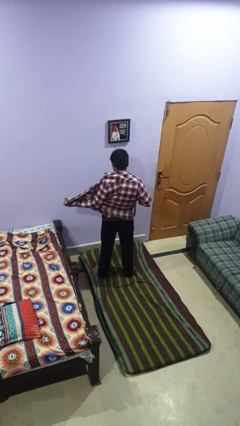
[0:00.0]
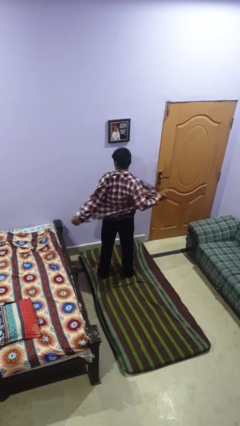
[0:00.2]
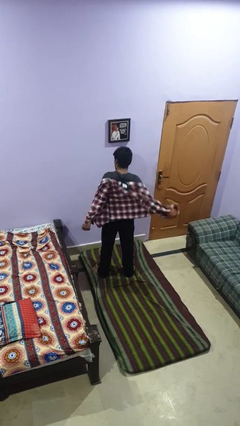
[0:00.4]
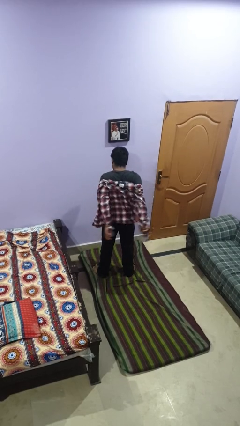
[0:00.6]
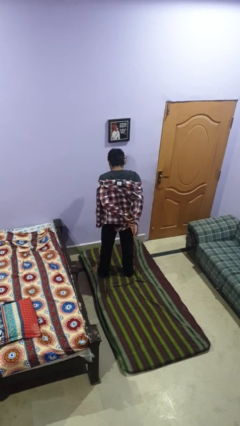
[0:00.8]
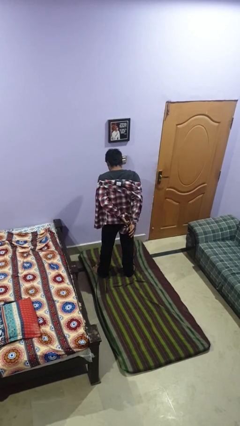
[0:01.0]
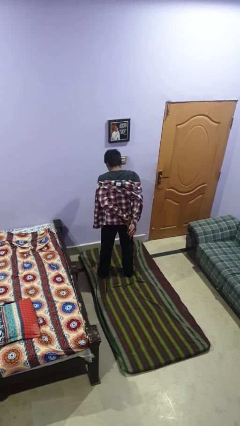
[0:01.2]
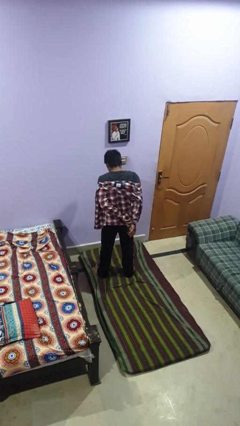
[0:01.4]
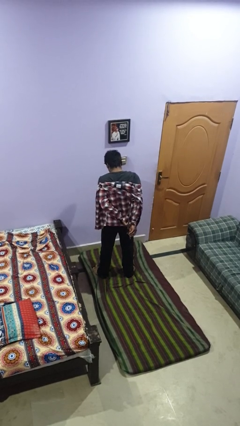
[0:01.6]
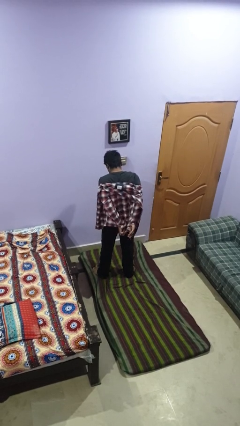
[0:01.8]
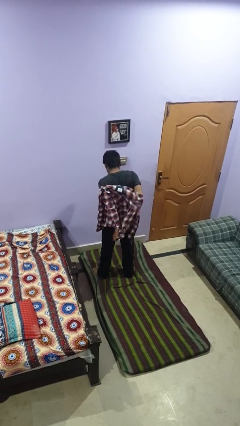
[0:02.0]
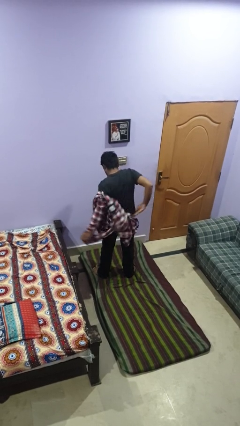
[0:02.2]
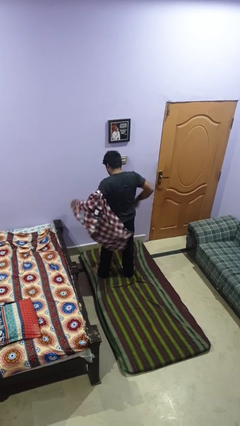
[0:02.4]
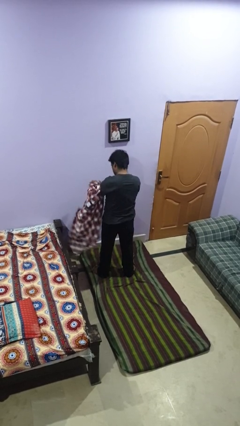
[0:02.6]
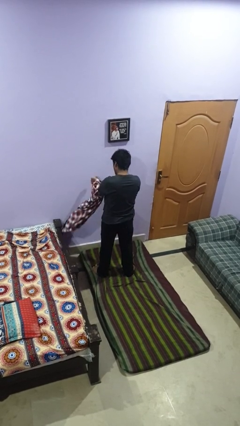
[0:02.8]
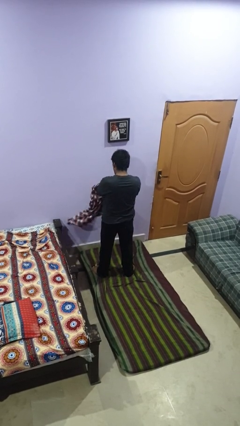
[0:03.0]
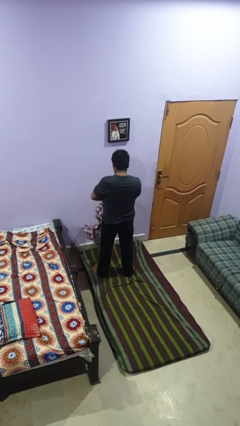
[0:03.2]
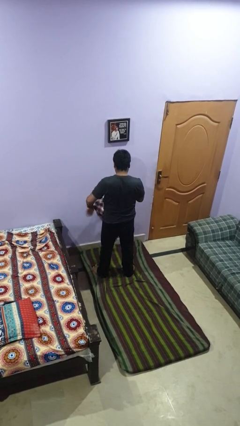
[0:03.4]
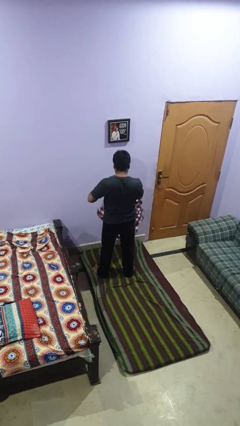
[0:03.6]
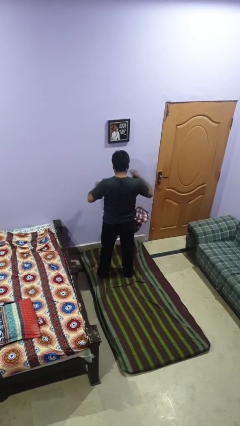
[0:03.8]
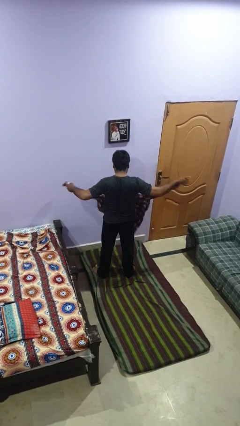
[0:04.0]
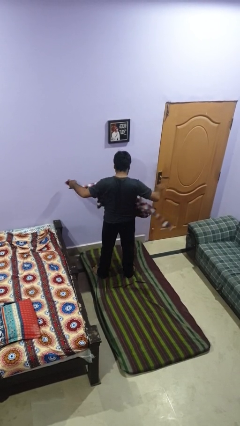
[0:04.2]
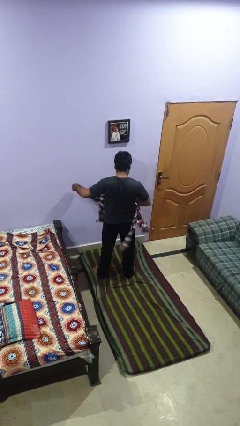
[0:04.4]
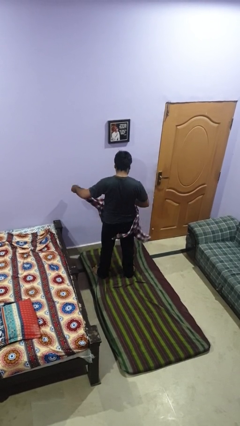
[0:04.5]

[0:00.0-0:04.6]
person takes off shirt

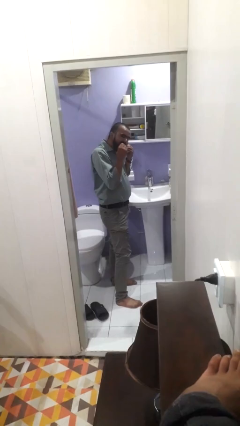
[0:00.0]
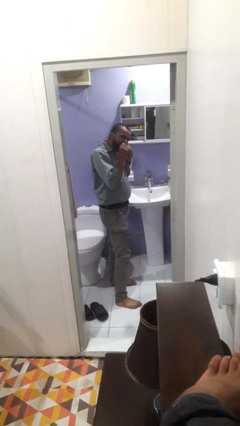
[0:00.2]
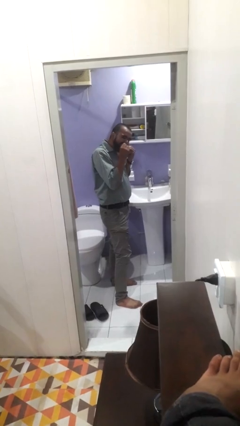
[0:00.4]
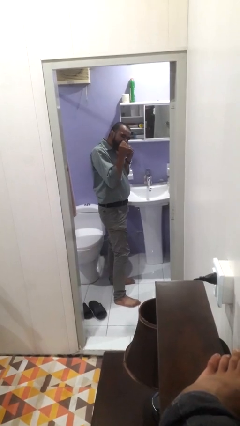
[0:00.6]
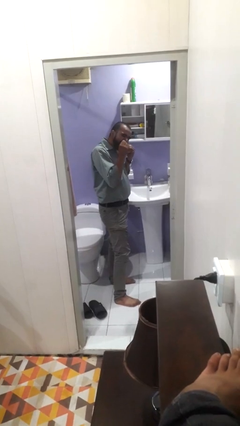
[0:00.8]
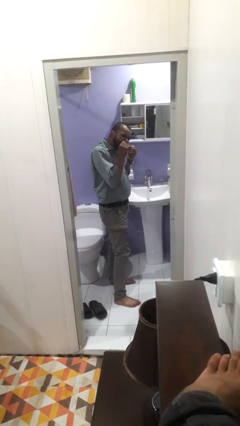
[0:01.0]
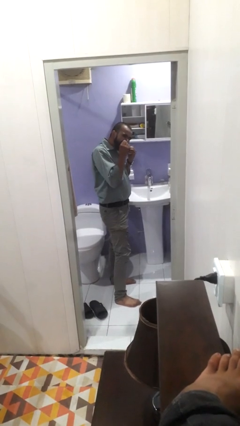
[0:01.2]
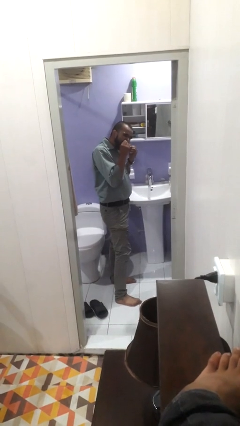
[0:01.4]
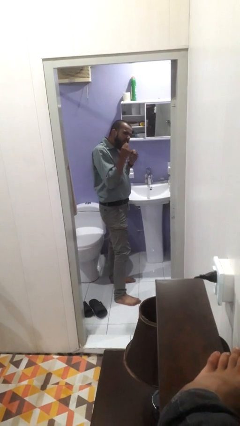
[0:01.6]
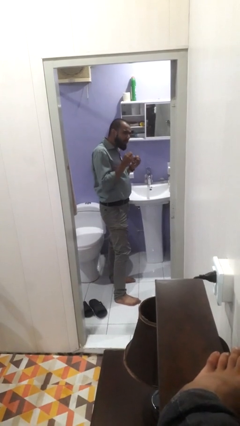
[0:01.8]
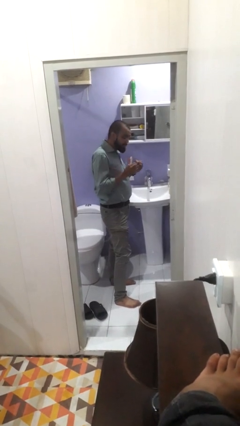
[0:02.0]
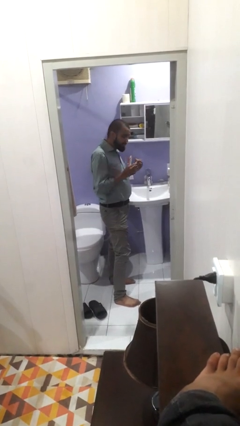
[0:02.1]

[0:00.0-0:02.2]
person flosses

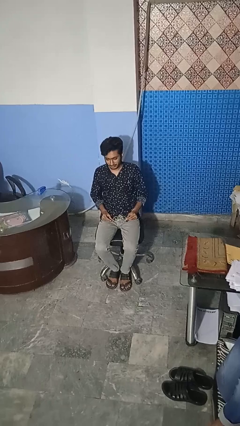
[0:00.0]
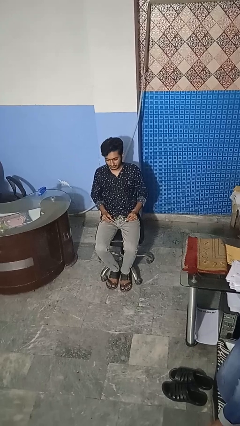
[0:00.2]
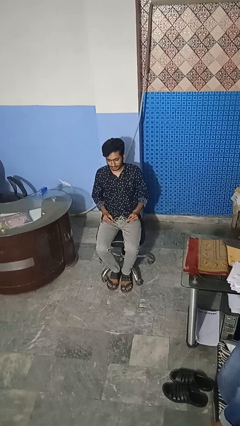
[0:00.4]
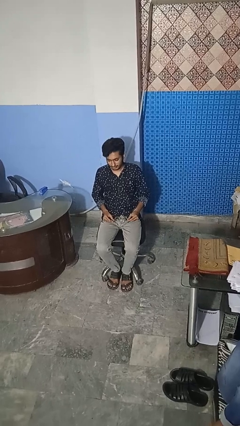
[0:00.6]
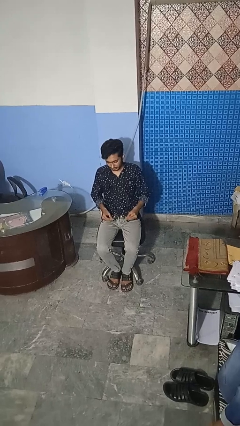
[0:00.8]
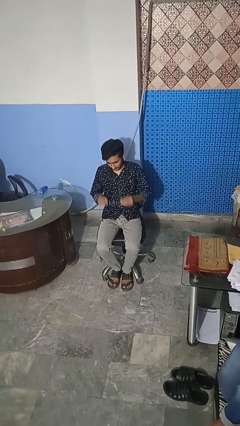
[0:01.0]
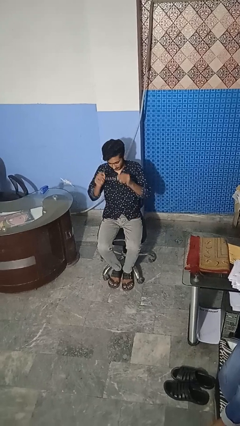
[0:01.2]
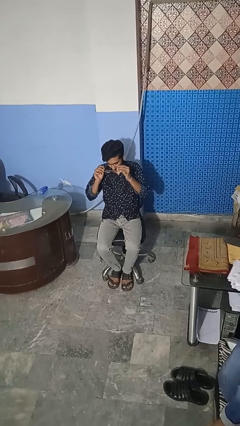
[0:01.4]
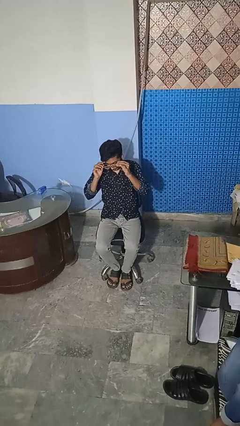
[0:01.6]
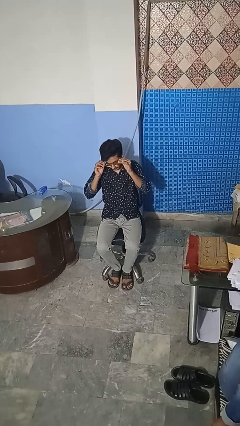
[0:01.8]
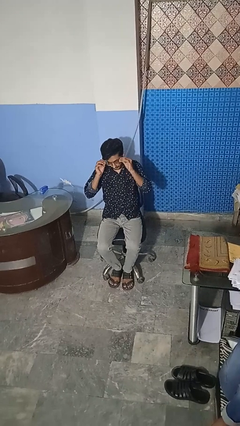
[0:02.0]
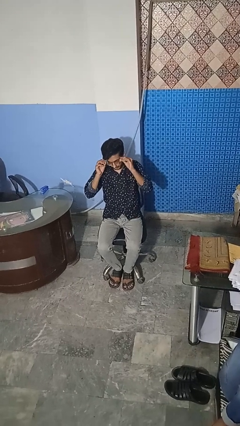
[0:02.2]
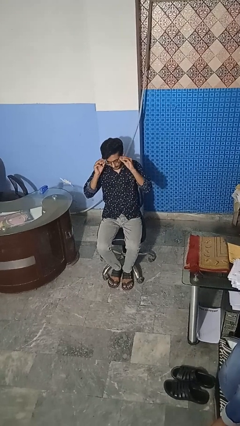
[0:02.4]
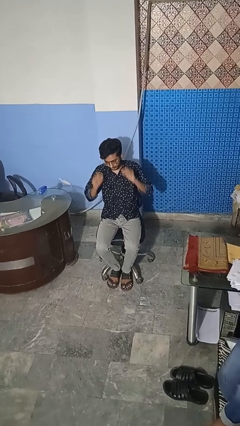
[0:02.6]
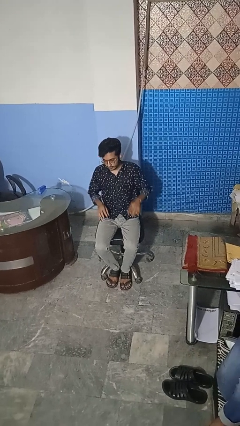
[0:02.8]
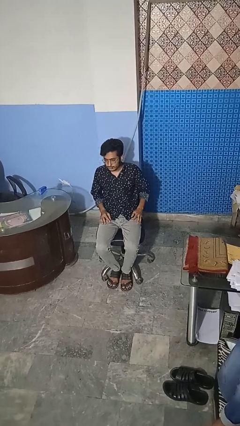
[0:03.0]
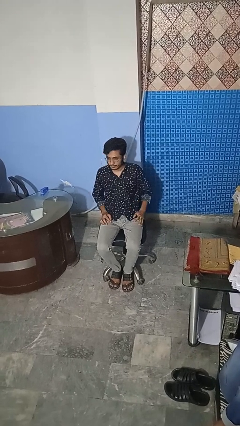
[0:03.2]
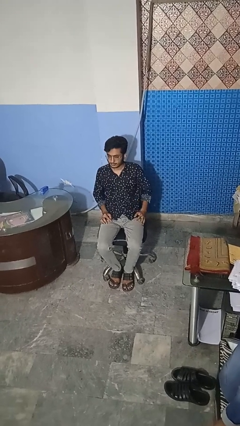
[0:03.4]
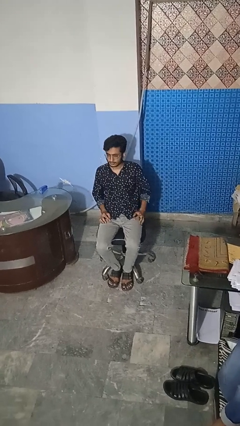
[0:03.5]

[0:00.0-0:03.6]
person puts on glasses

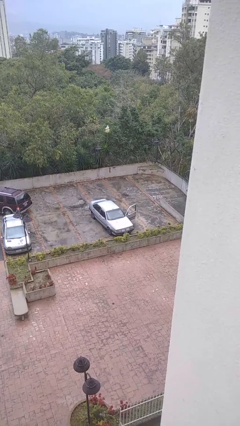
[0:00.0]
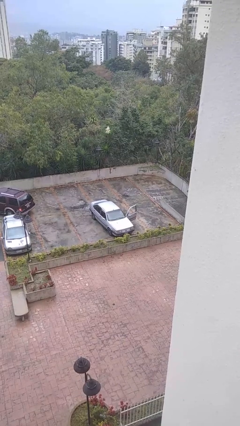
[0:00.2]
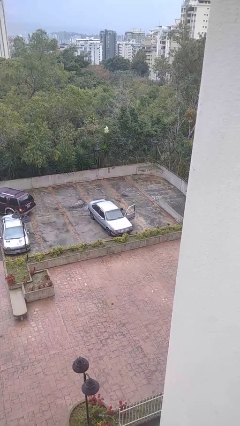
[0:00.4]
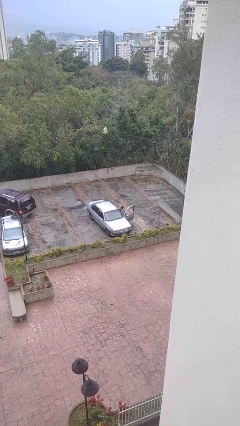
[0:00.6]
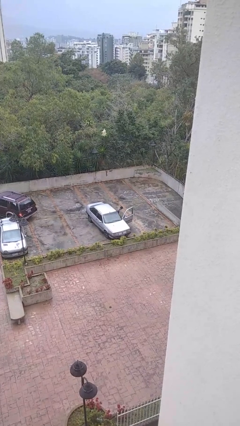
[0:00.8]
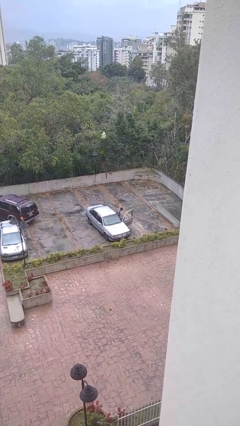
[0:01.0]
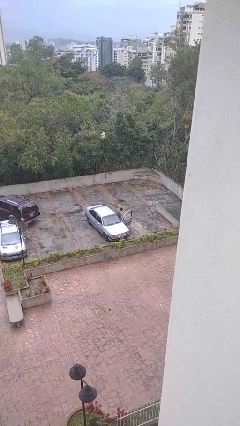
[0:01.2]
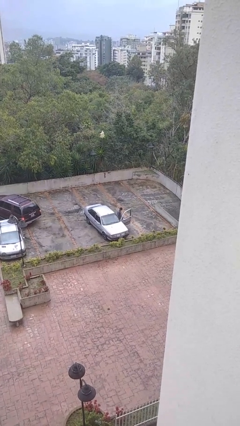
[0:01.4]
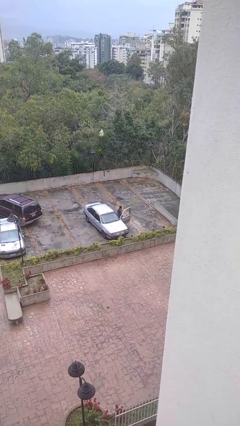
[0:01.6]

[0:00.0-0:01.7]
person exits car

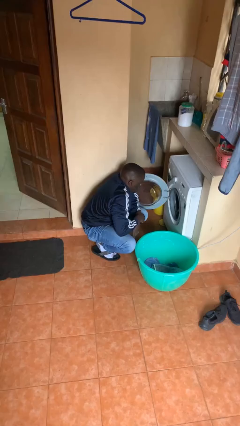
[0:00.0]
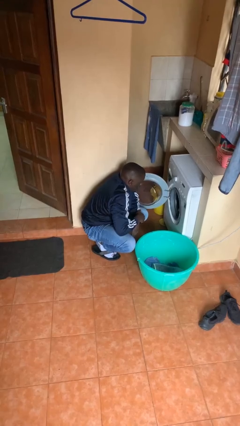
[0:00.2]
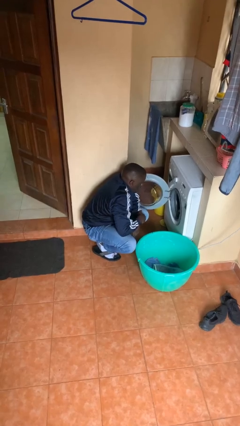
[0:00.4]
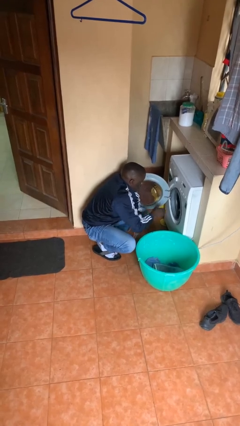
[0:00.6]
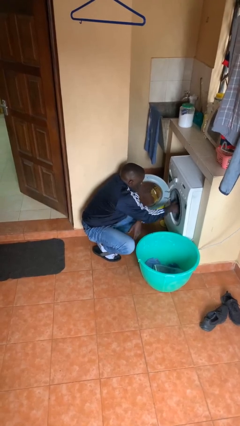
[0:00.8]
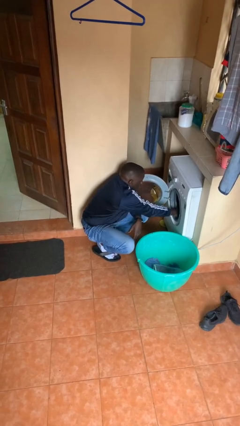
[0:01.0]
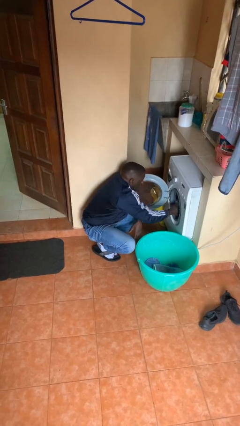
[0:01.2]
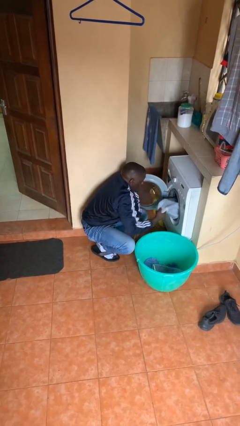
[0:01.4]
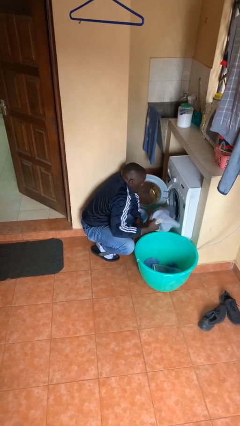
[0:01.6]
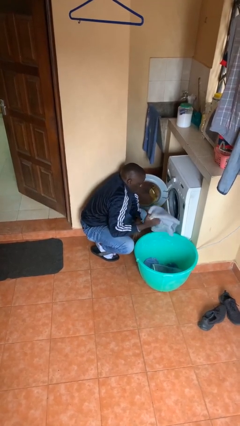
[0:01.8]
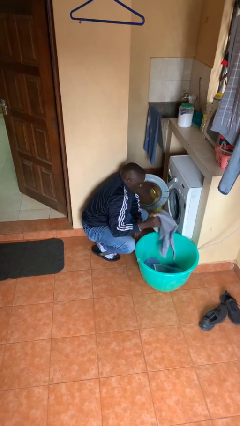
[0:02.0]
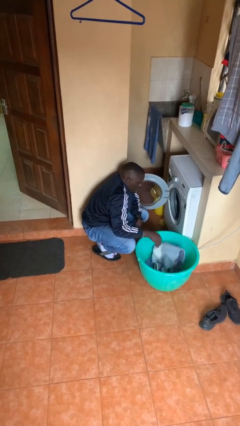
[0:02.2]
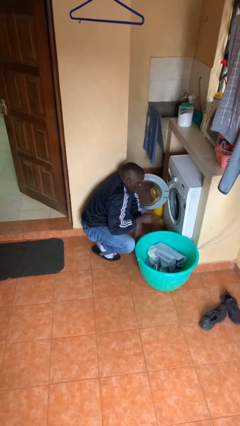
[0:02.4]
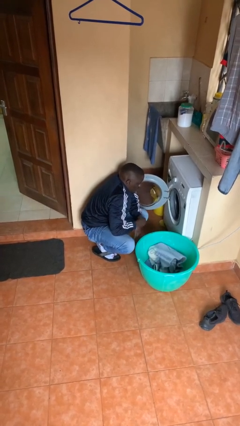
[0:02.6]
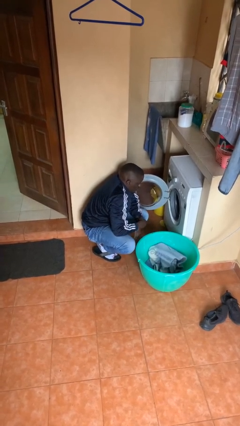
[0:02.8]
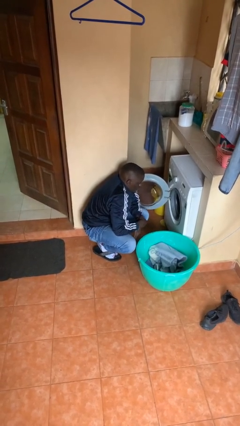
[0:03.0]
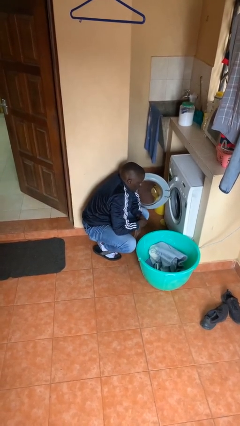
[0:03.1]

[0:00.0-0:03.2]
person loads clotheswasher

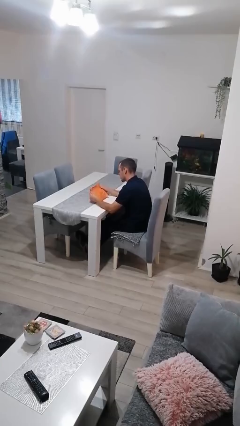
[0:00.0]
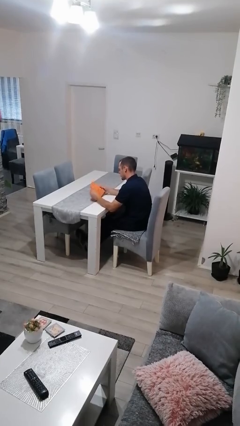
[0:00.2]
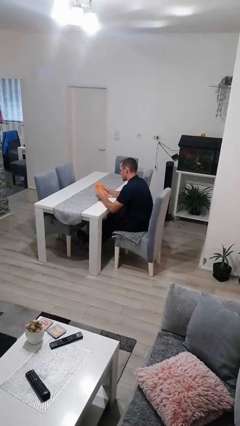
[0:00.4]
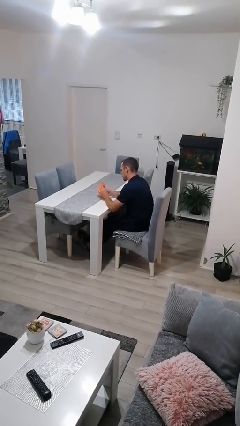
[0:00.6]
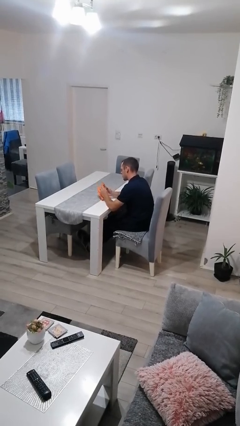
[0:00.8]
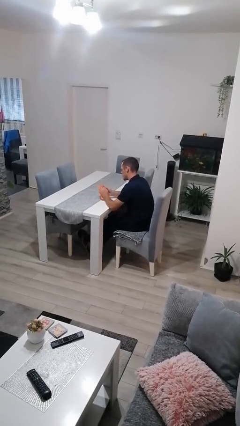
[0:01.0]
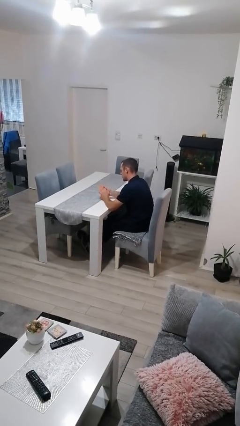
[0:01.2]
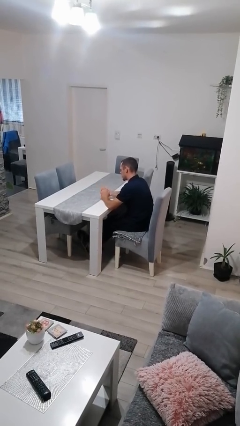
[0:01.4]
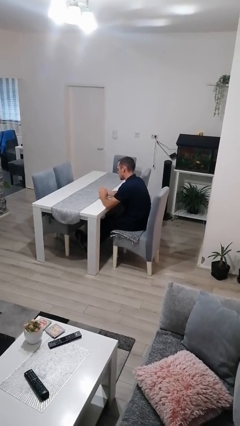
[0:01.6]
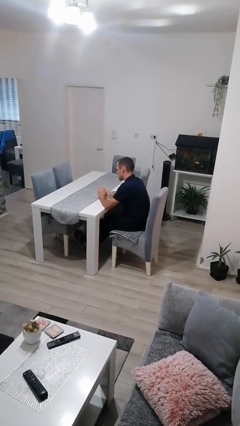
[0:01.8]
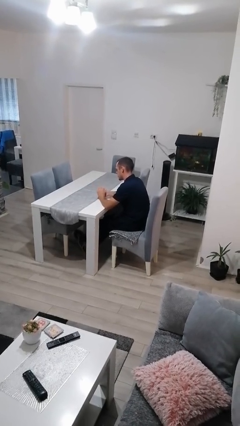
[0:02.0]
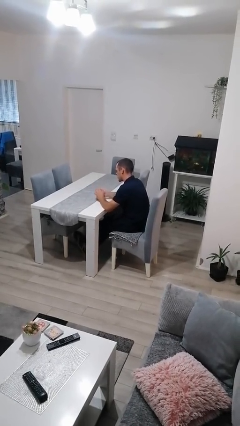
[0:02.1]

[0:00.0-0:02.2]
person crumples paper
